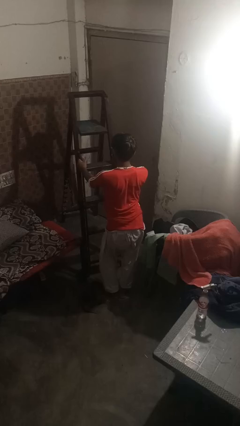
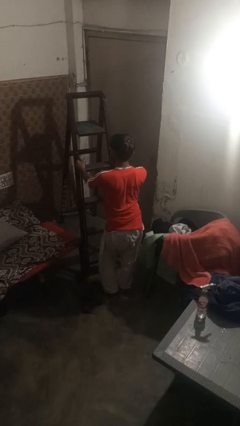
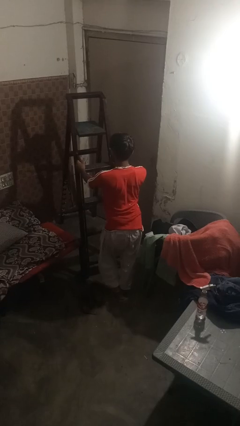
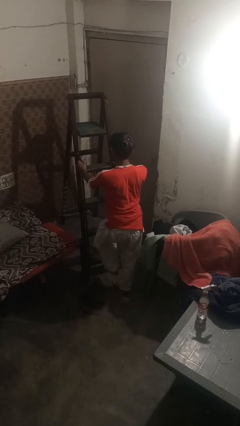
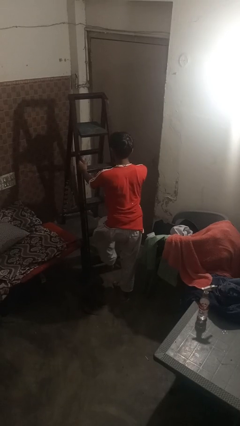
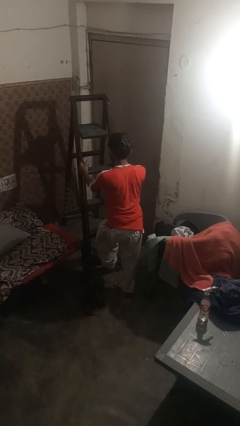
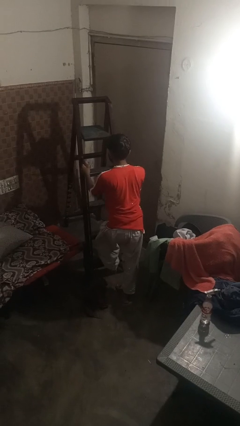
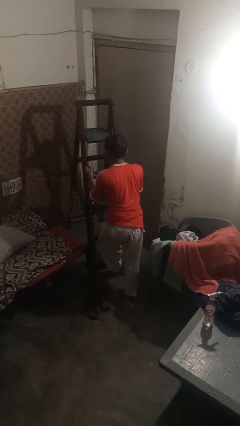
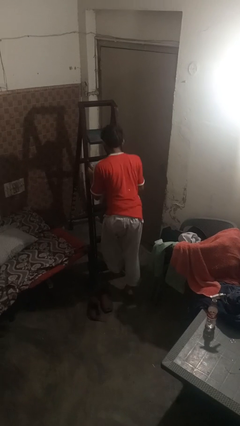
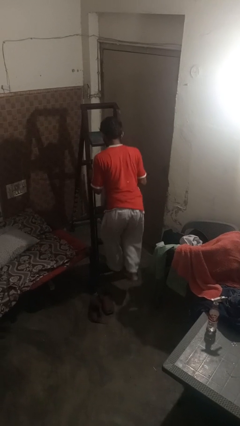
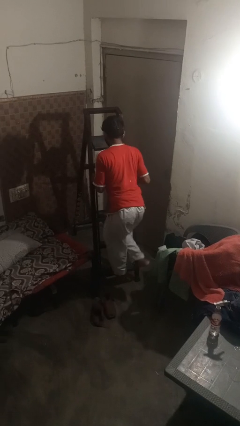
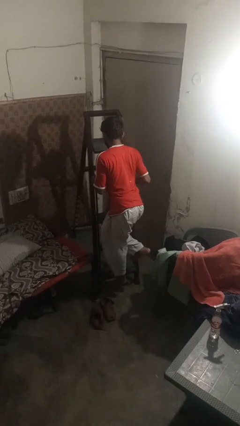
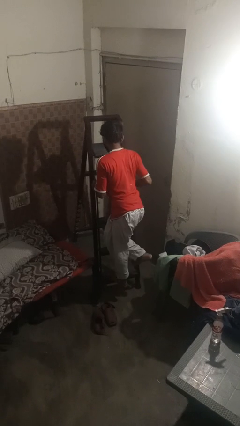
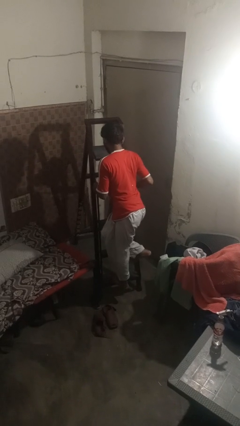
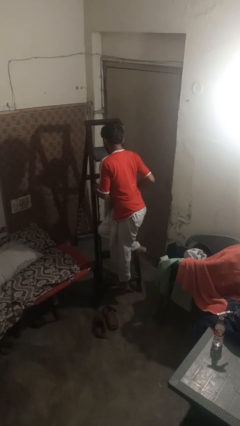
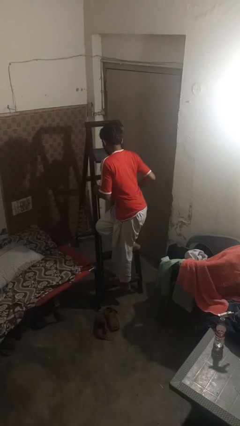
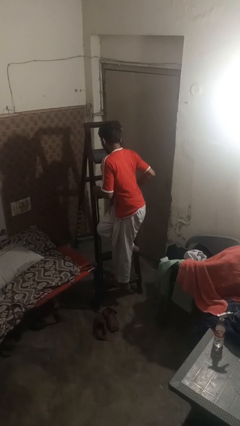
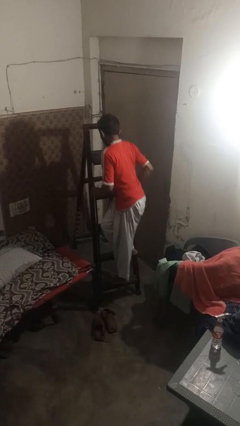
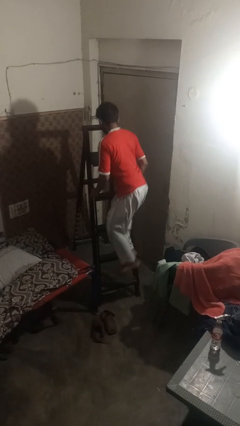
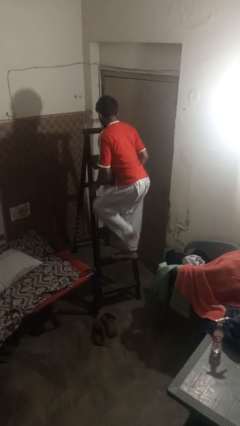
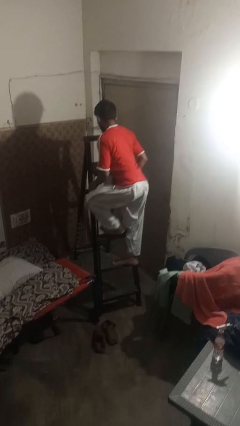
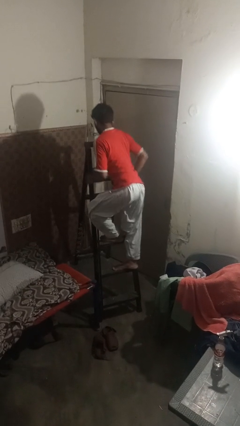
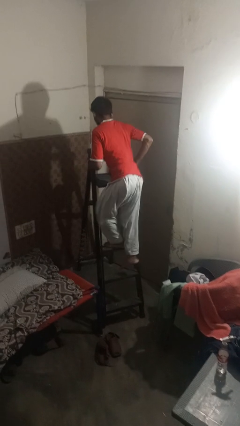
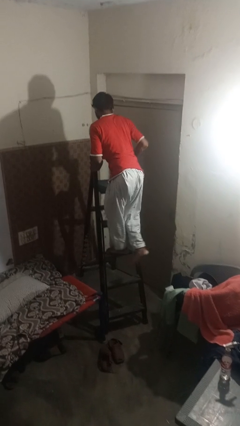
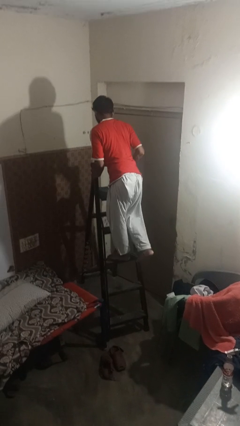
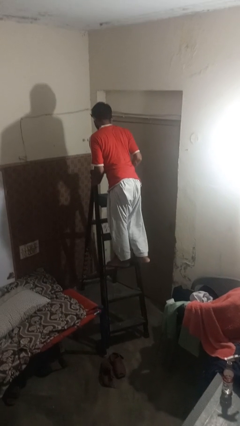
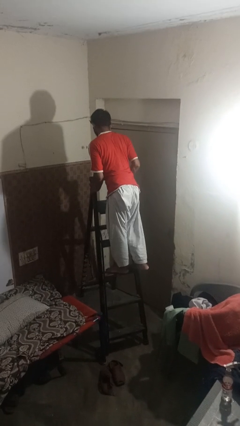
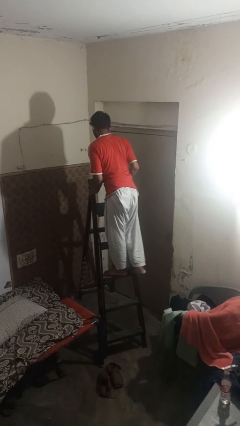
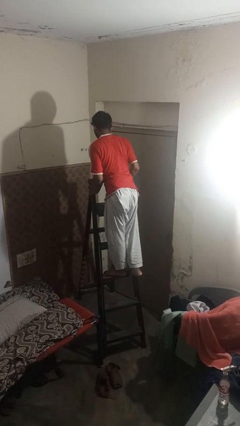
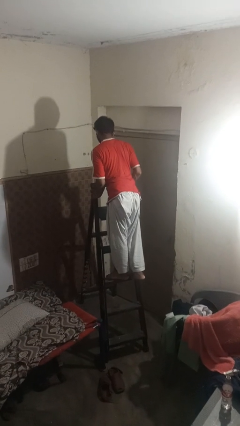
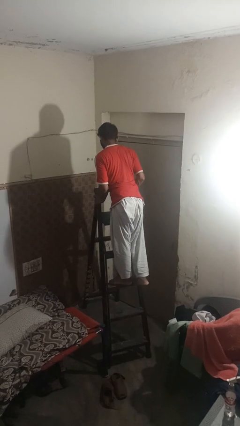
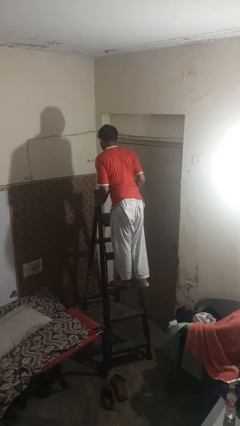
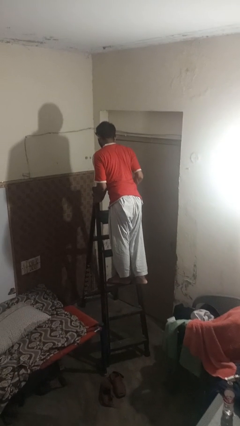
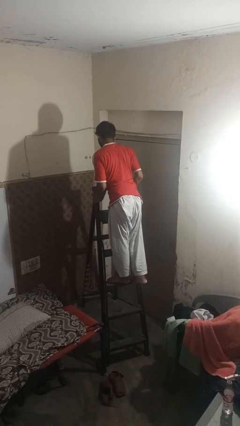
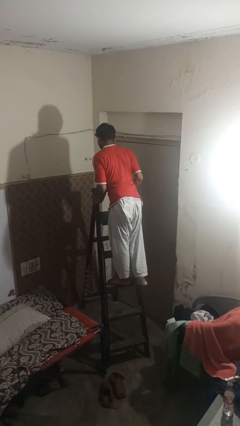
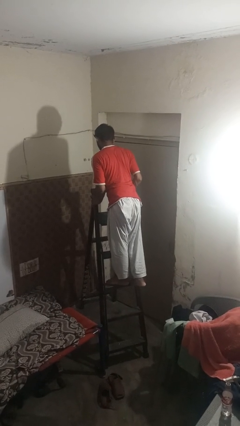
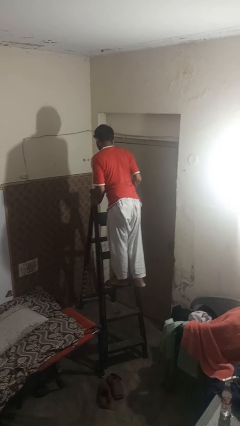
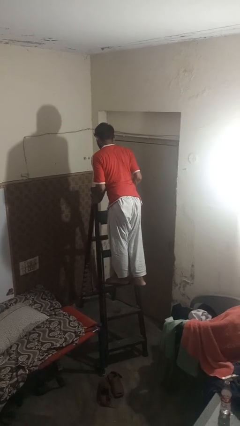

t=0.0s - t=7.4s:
person climbs up ladder

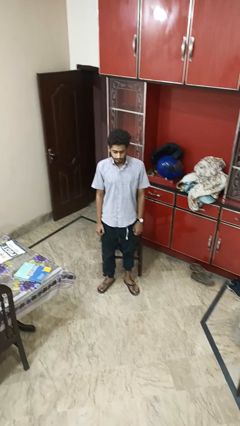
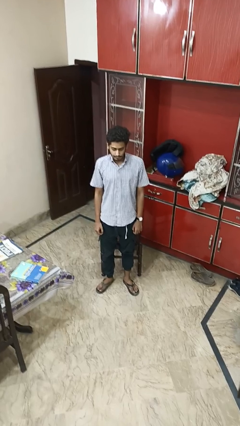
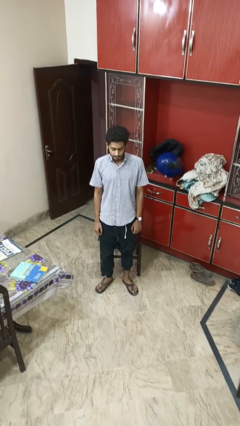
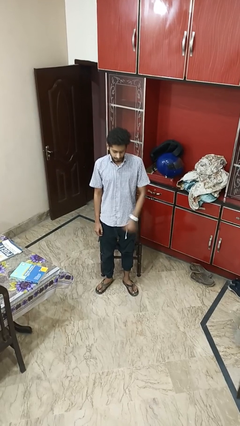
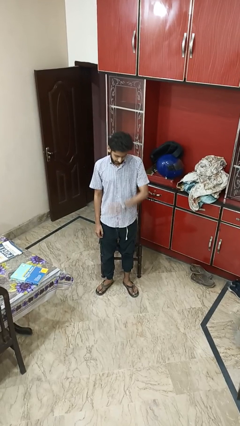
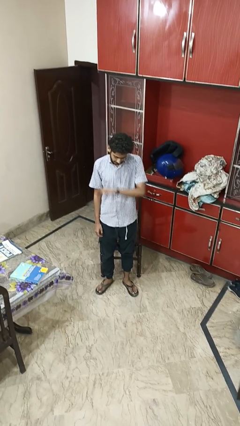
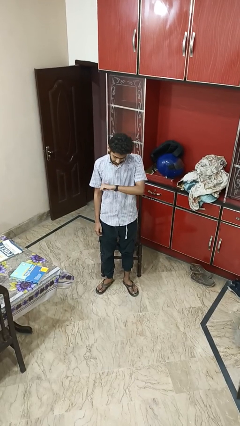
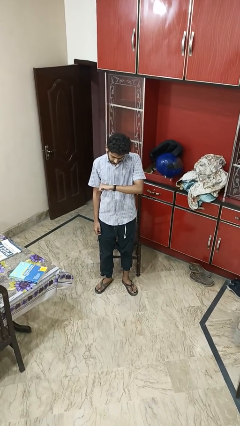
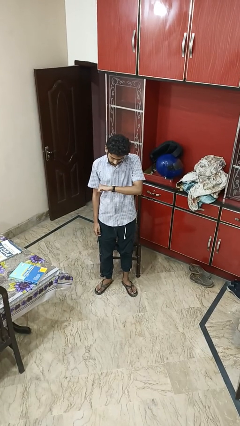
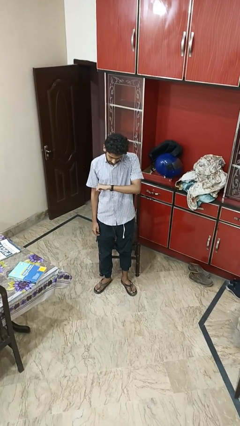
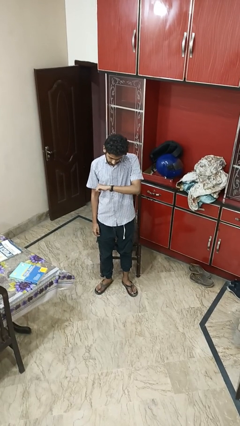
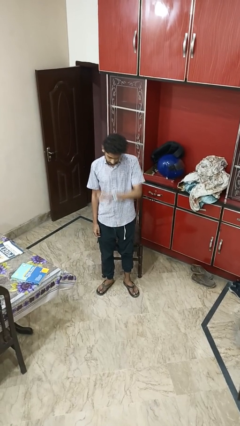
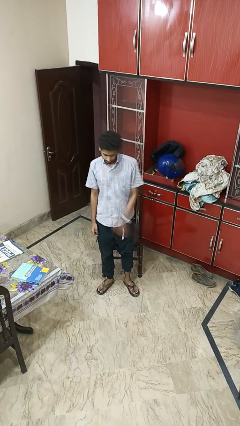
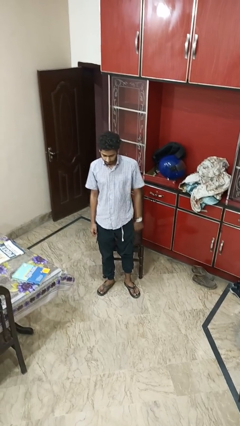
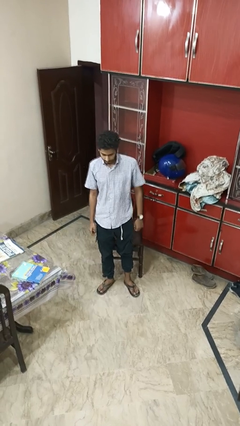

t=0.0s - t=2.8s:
person looks at wristwatch

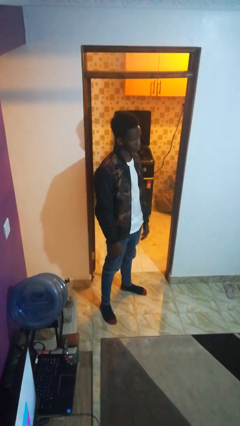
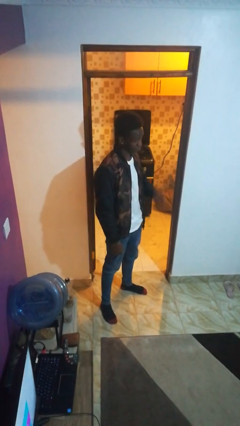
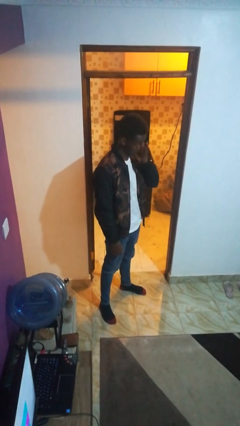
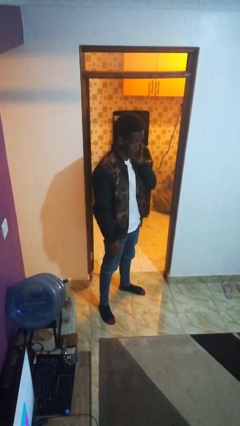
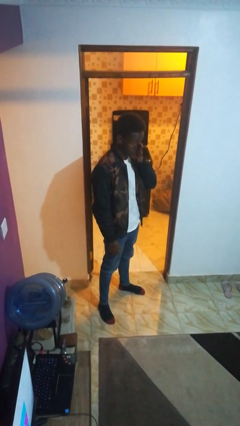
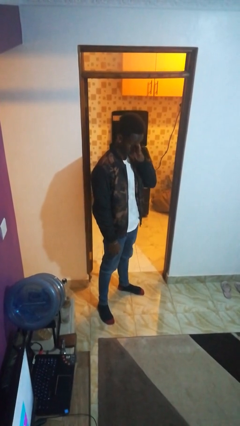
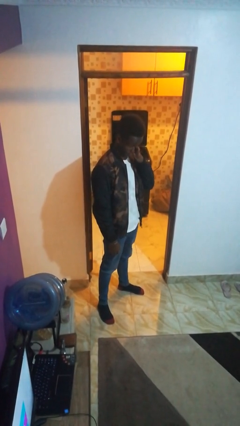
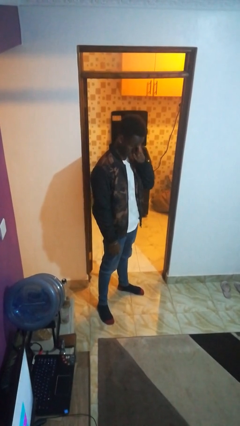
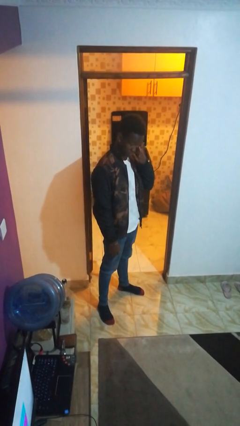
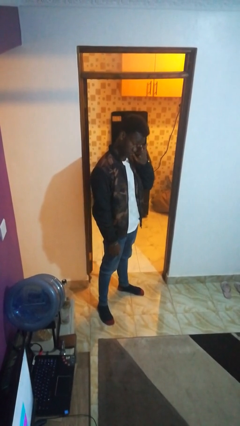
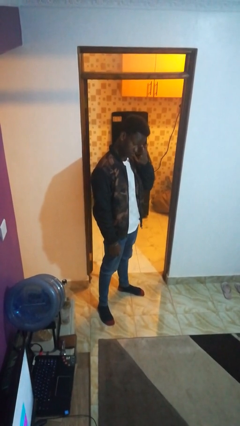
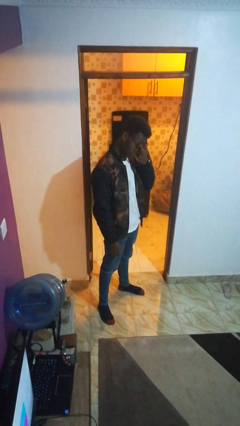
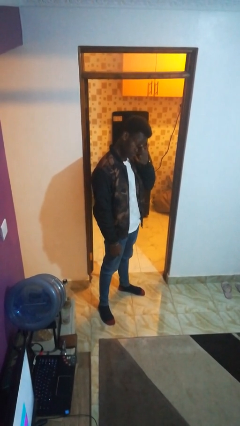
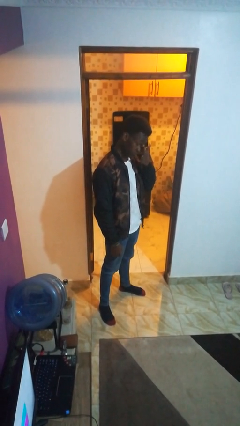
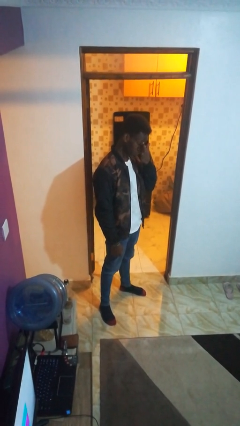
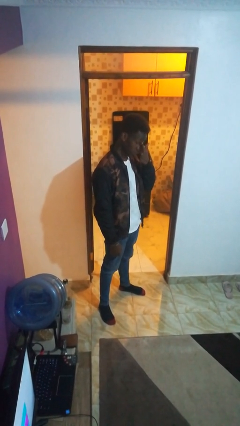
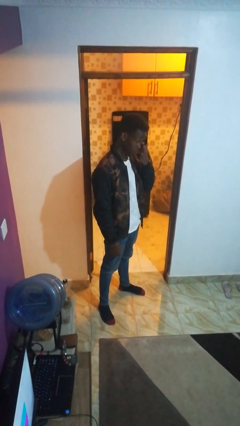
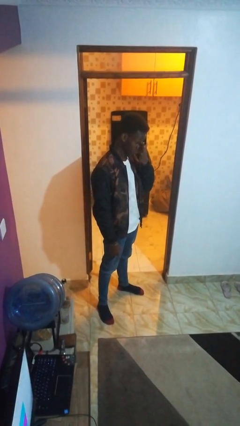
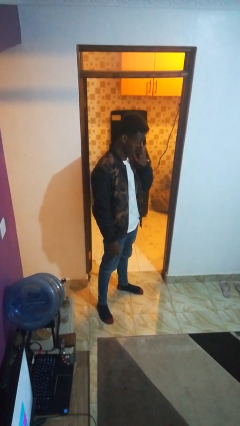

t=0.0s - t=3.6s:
person scratches face

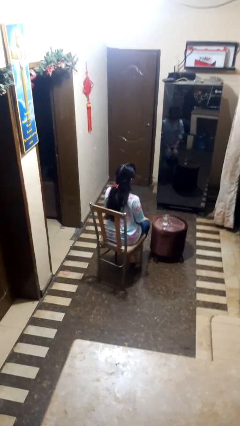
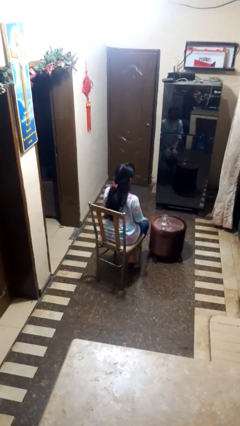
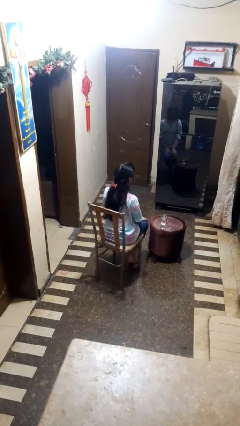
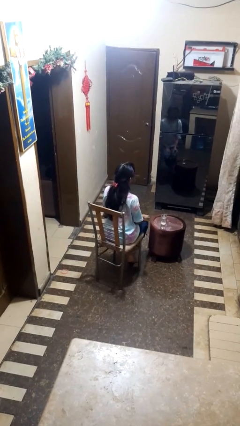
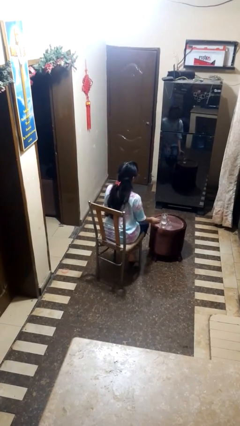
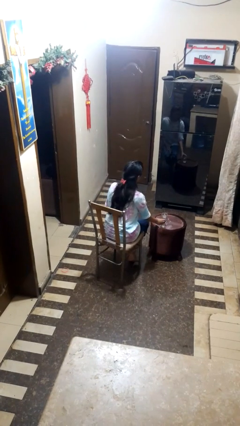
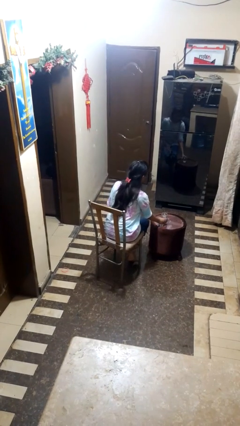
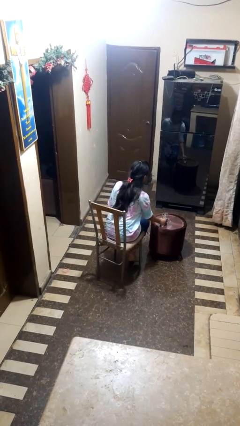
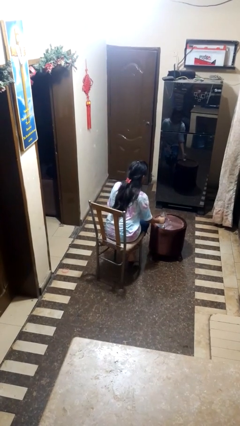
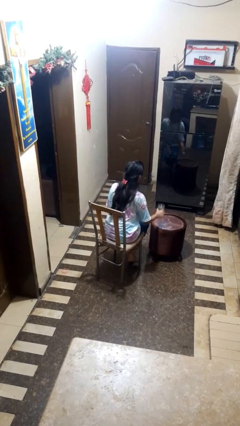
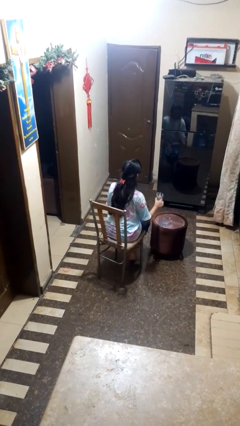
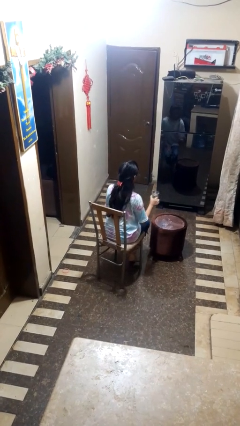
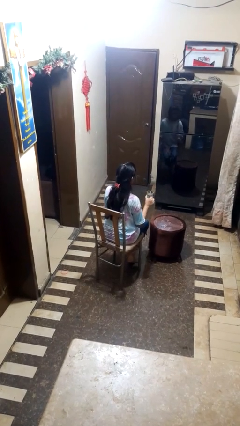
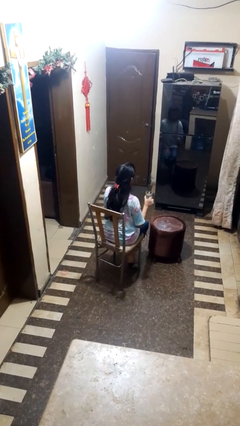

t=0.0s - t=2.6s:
person picks up object from table

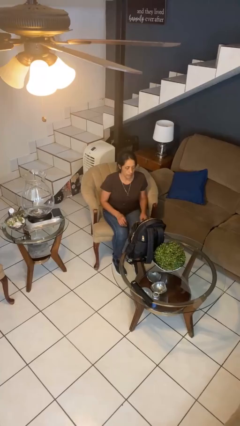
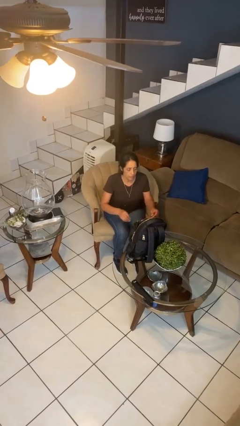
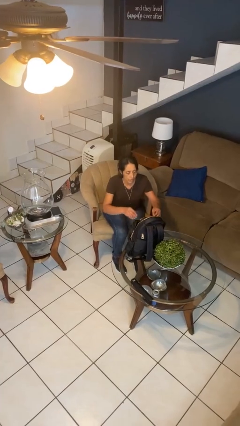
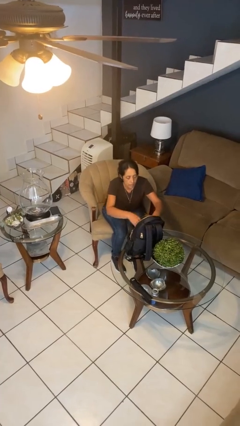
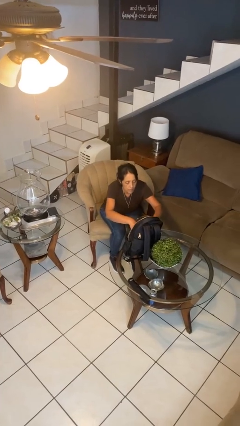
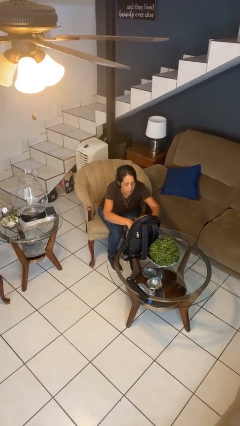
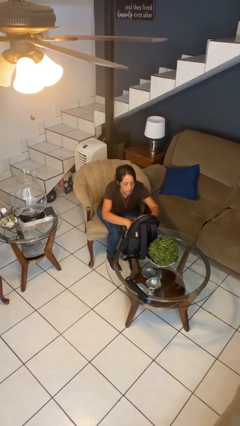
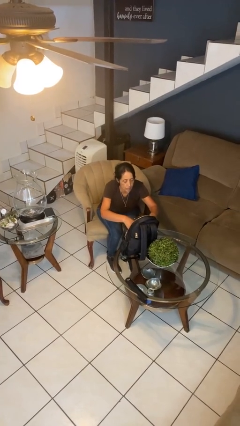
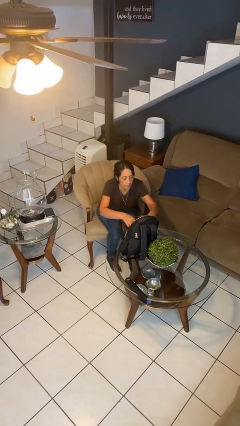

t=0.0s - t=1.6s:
person searches in backpack
